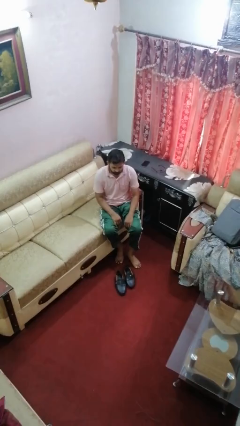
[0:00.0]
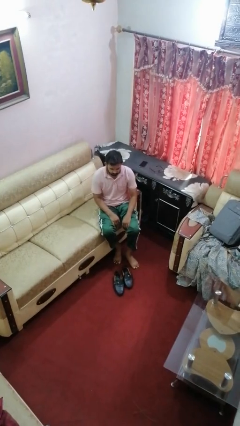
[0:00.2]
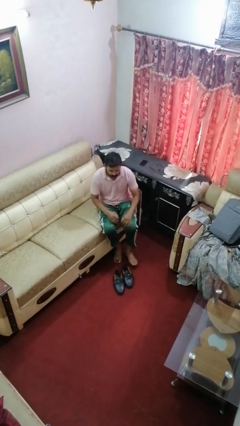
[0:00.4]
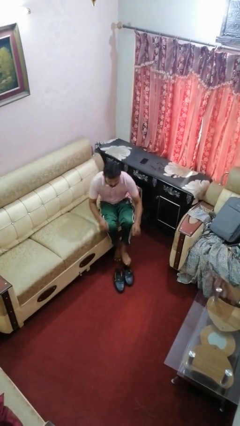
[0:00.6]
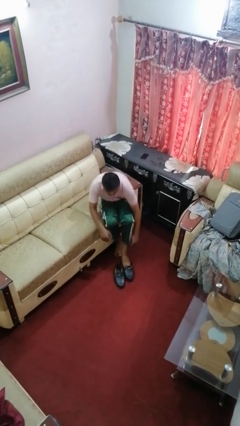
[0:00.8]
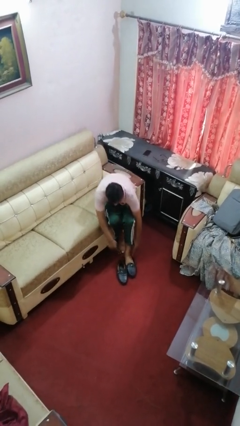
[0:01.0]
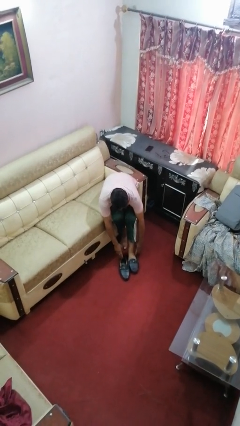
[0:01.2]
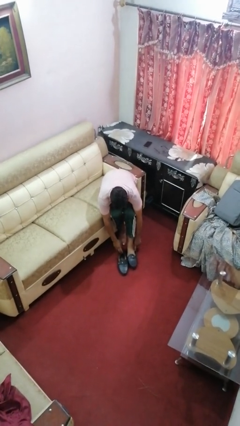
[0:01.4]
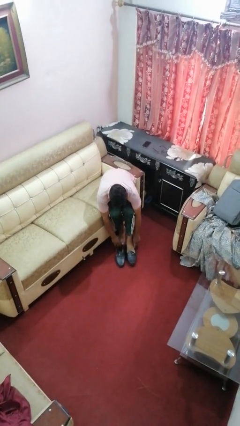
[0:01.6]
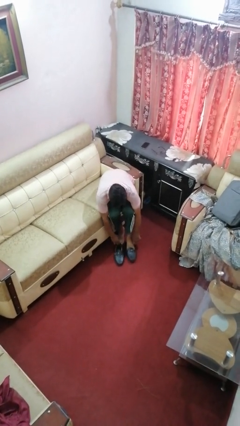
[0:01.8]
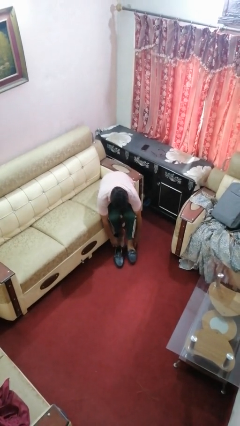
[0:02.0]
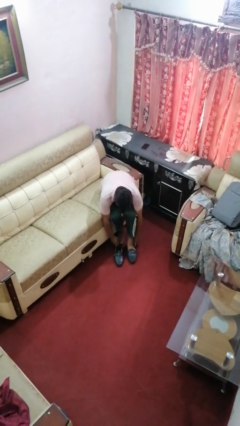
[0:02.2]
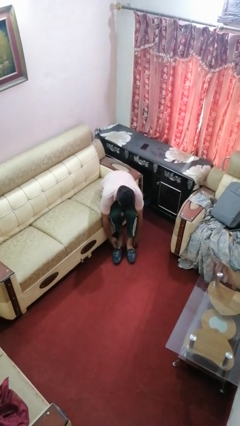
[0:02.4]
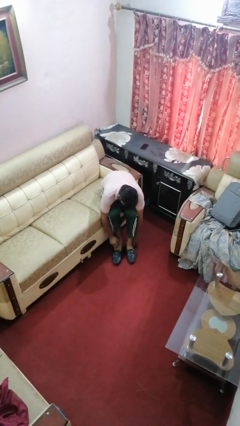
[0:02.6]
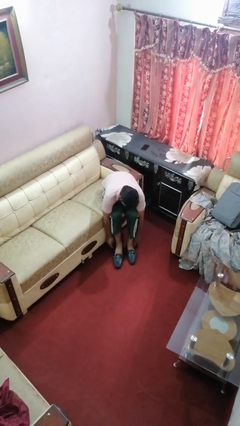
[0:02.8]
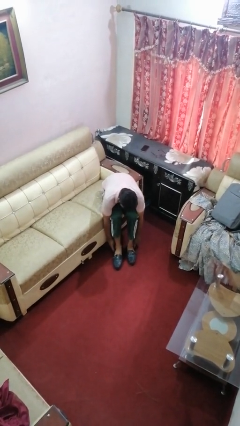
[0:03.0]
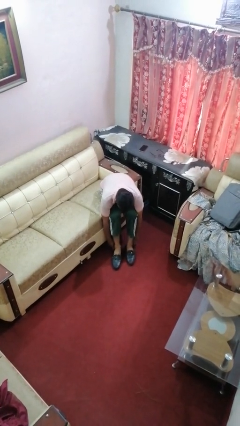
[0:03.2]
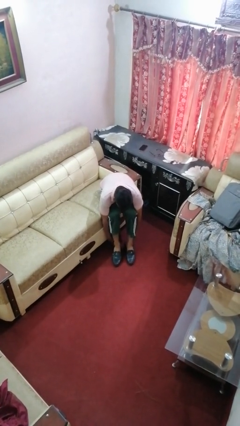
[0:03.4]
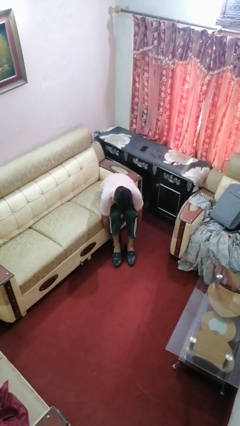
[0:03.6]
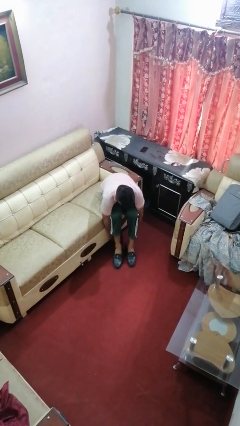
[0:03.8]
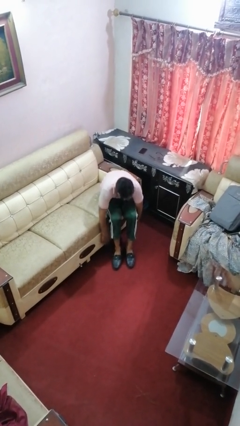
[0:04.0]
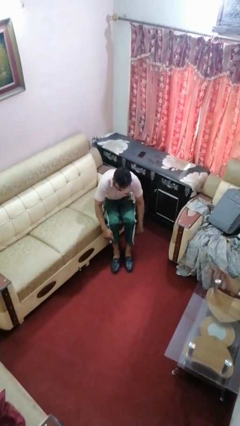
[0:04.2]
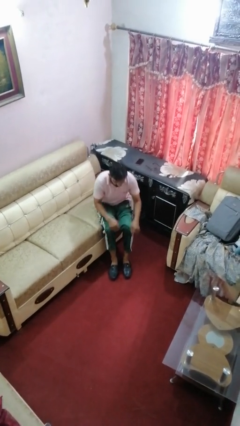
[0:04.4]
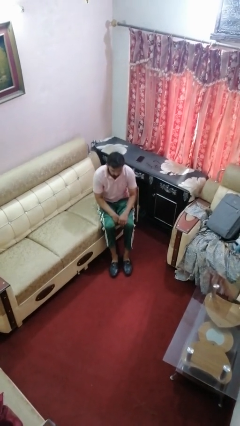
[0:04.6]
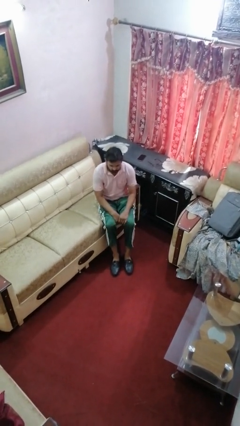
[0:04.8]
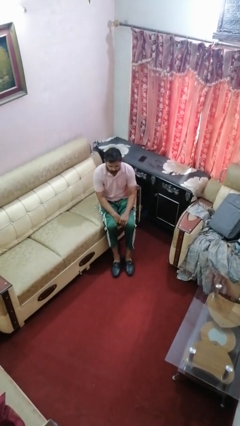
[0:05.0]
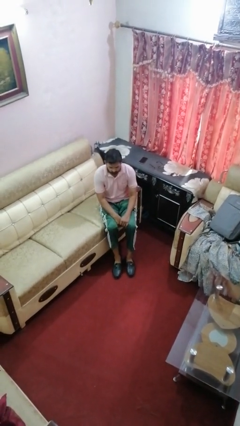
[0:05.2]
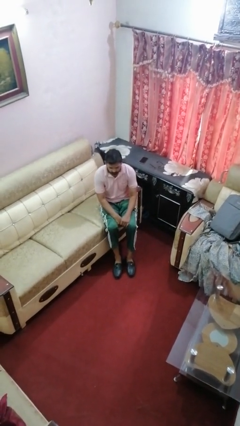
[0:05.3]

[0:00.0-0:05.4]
person puts on shoes

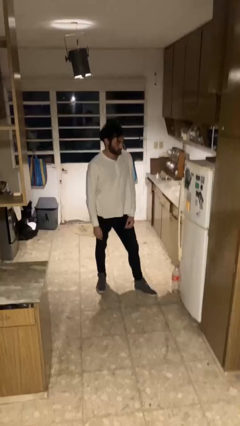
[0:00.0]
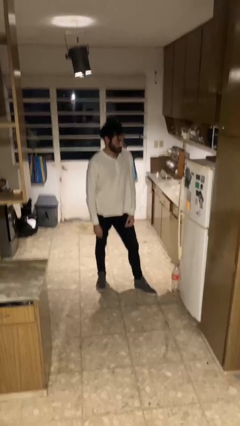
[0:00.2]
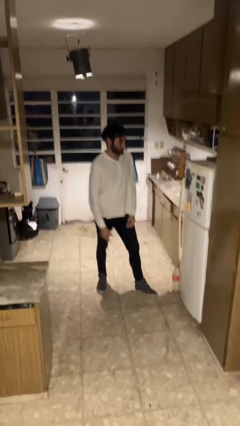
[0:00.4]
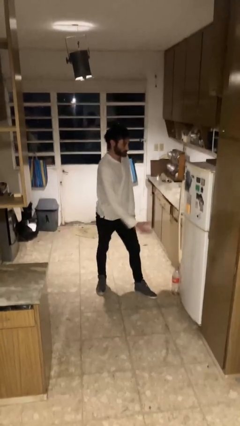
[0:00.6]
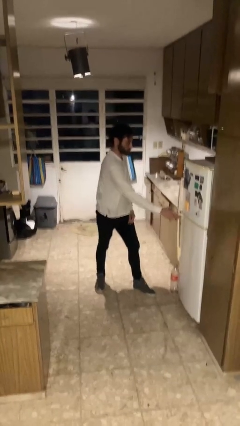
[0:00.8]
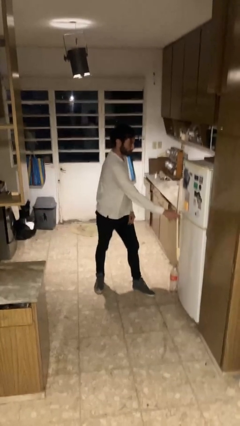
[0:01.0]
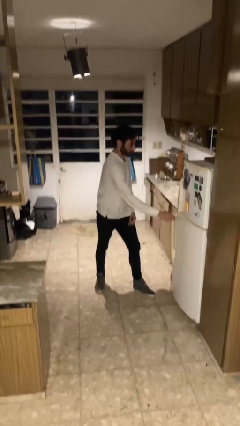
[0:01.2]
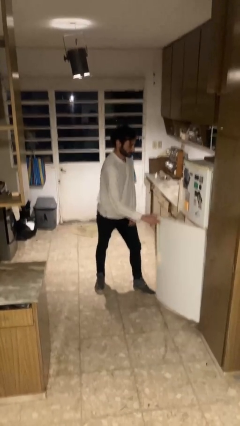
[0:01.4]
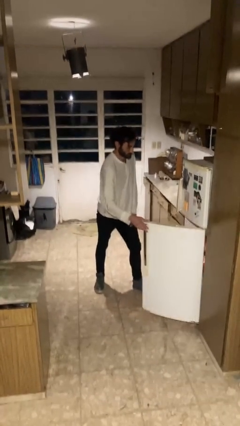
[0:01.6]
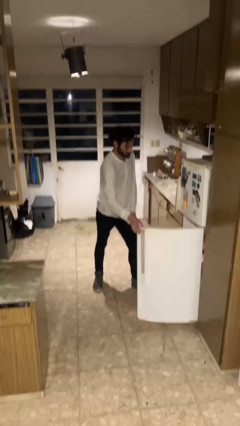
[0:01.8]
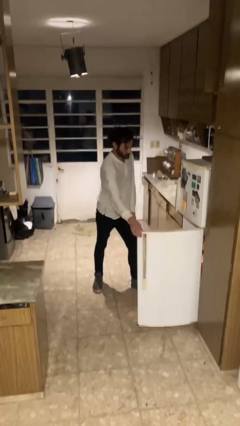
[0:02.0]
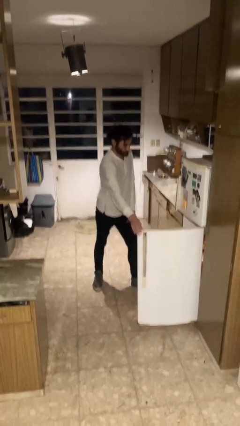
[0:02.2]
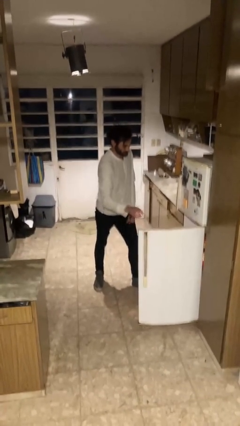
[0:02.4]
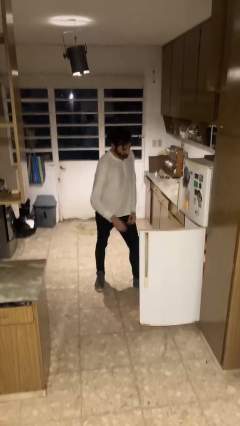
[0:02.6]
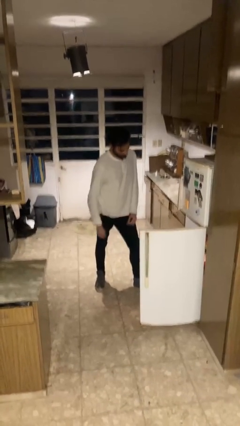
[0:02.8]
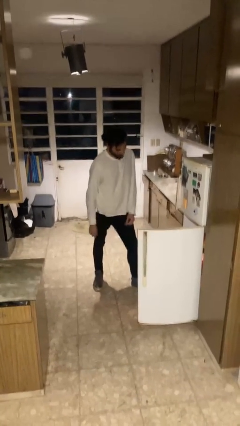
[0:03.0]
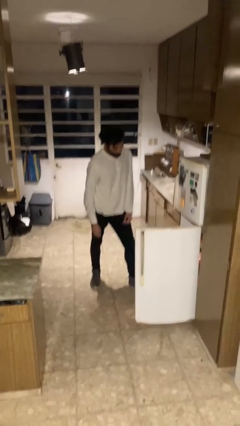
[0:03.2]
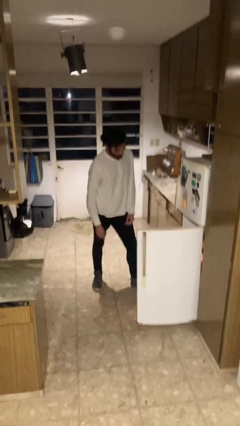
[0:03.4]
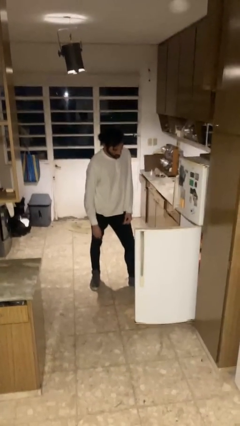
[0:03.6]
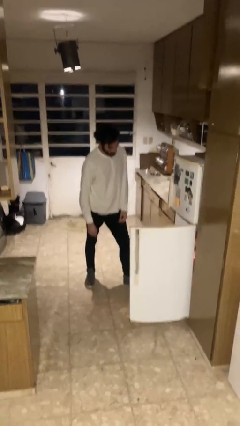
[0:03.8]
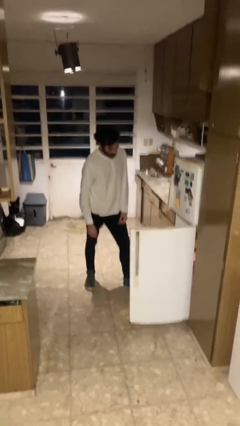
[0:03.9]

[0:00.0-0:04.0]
person opens refrigerator

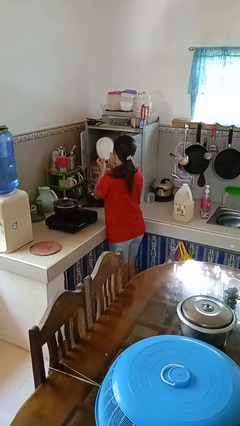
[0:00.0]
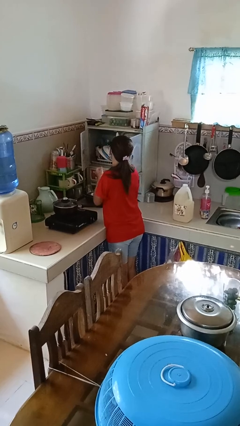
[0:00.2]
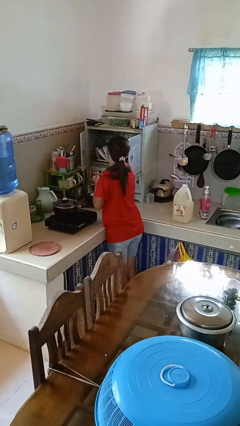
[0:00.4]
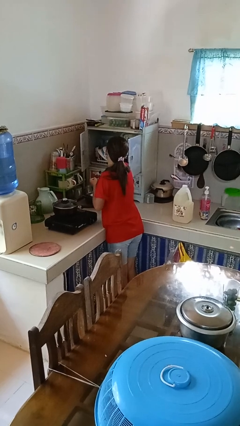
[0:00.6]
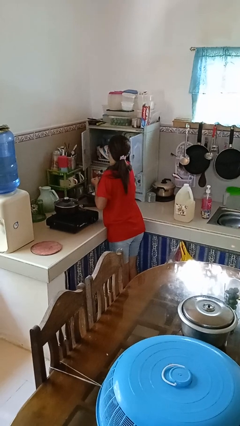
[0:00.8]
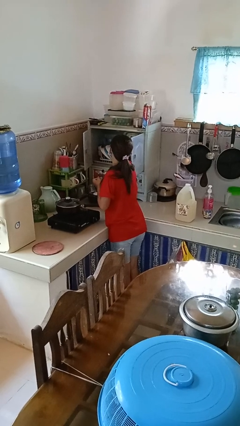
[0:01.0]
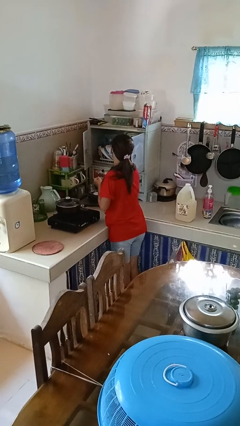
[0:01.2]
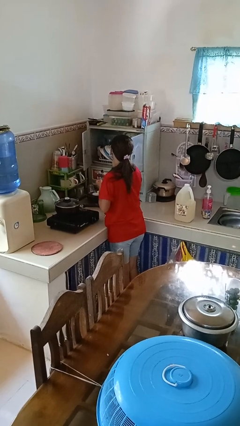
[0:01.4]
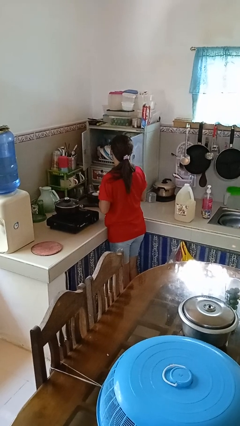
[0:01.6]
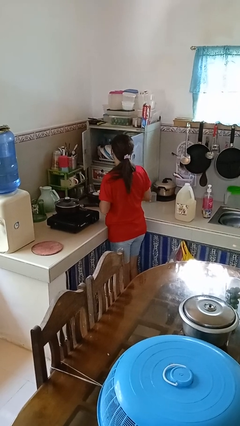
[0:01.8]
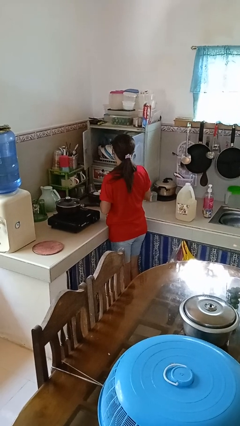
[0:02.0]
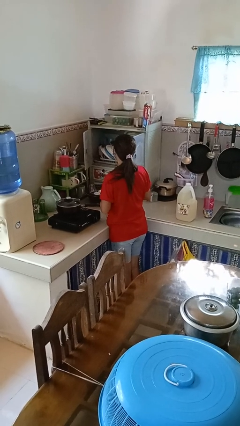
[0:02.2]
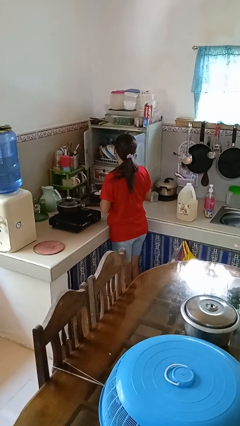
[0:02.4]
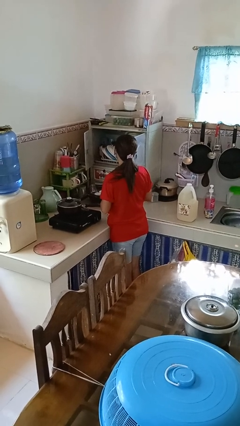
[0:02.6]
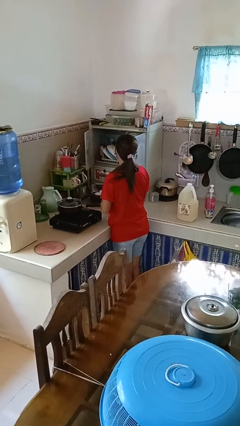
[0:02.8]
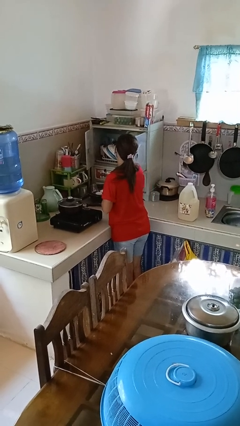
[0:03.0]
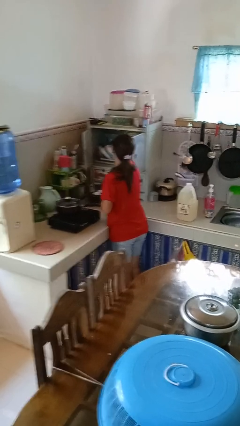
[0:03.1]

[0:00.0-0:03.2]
person puts object in cabinet

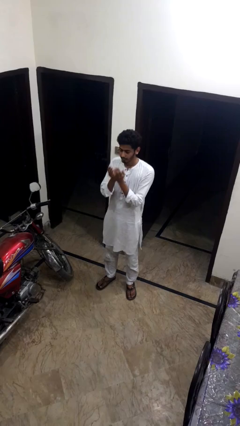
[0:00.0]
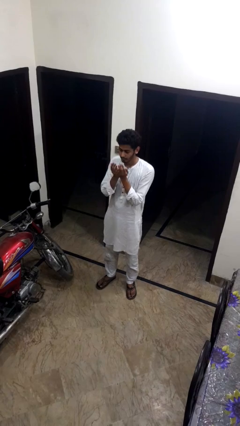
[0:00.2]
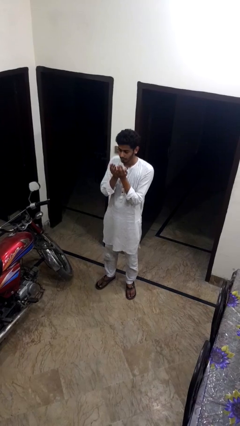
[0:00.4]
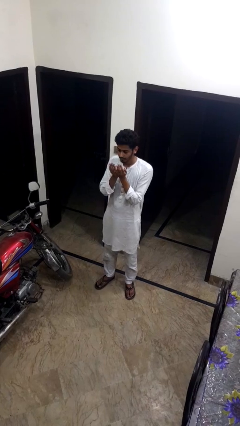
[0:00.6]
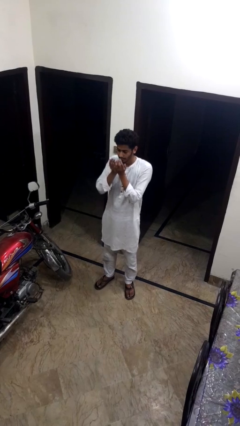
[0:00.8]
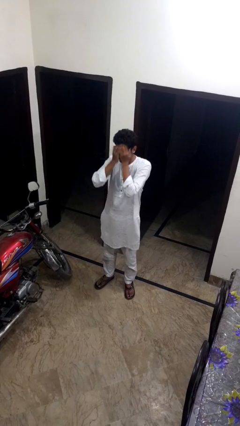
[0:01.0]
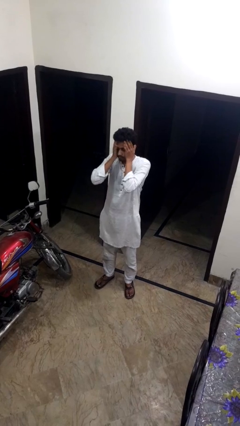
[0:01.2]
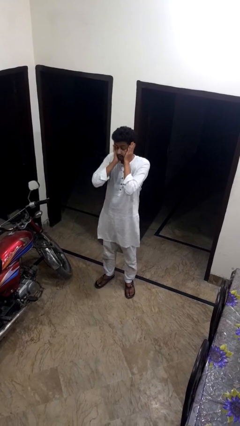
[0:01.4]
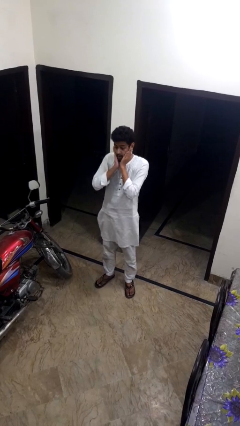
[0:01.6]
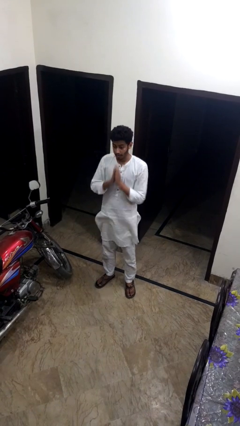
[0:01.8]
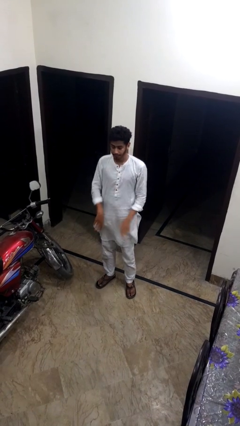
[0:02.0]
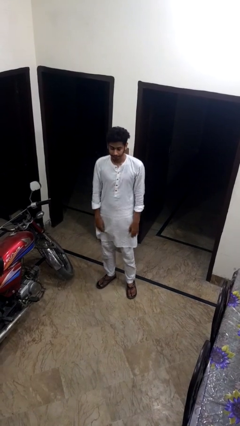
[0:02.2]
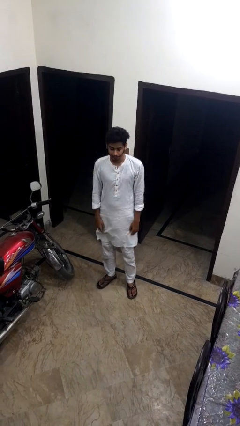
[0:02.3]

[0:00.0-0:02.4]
person prays

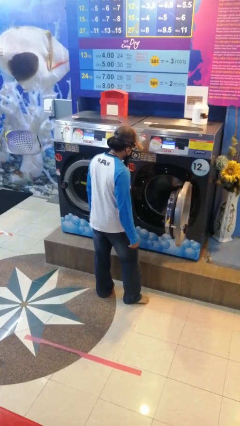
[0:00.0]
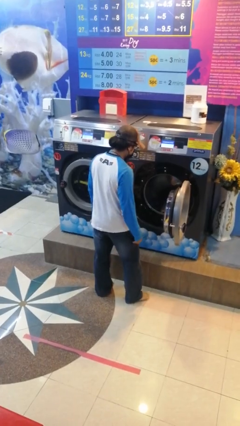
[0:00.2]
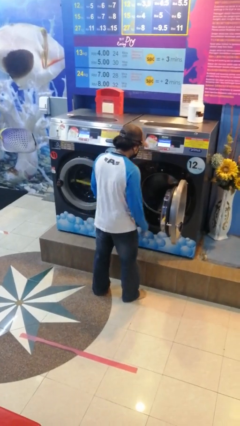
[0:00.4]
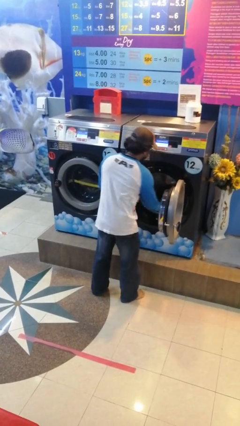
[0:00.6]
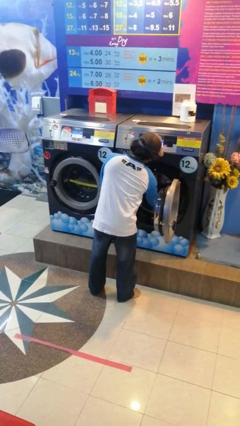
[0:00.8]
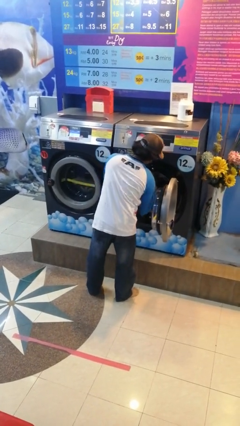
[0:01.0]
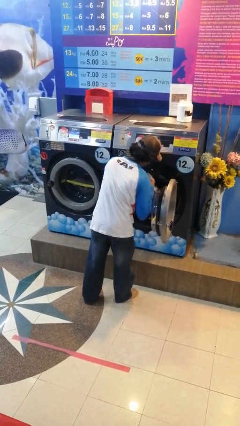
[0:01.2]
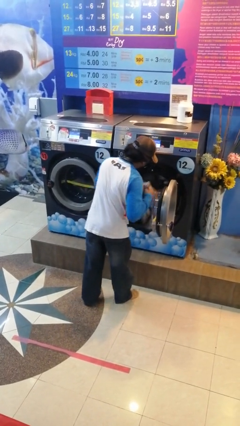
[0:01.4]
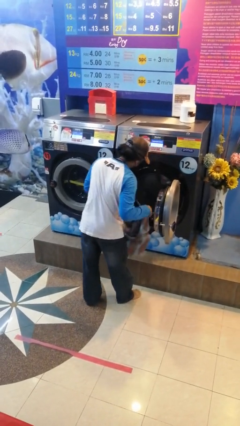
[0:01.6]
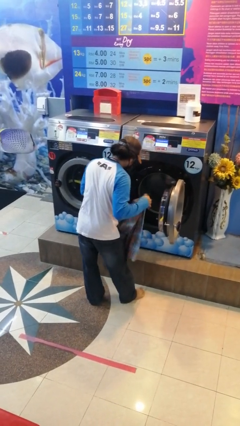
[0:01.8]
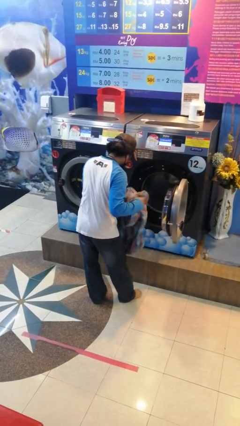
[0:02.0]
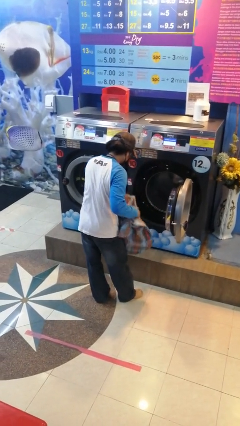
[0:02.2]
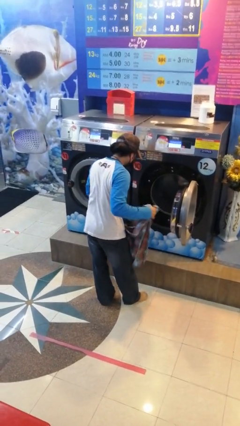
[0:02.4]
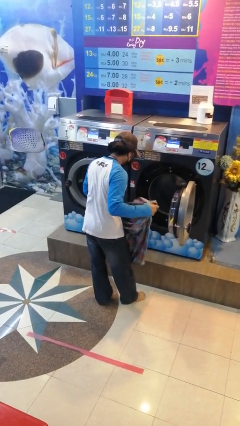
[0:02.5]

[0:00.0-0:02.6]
person unloads clotheswasher

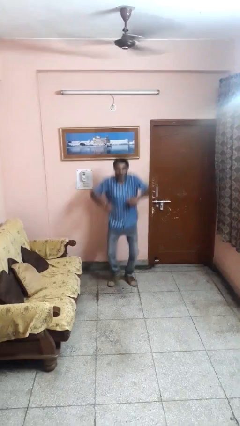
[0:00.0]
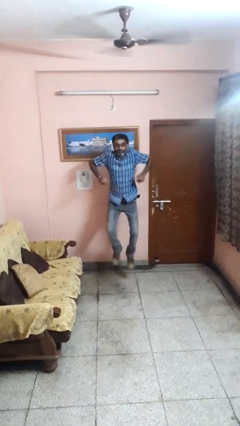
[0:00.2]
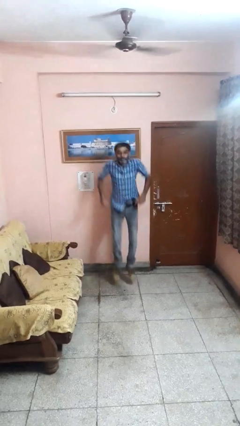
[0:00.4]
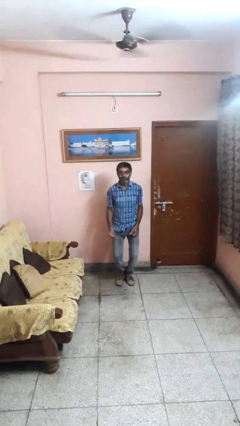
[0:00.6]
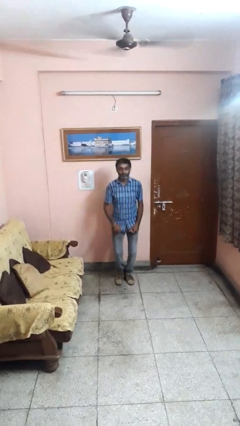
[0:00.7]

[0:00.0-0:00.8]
person jumps
